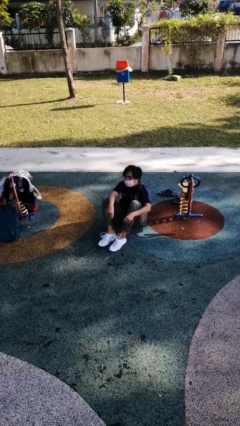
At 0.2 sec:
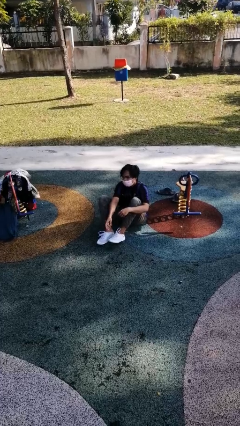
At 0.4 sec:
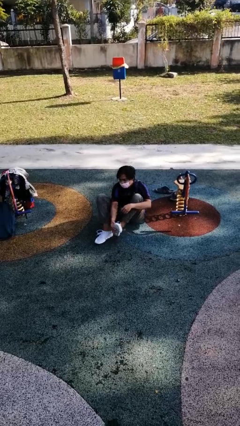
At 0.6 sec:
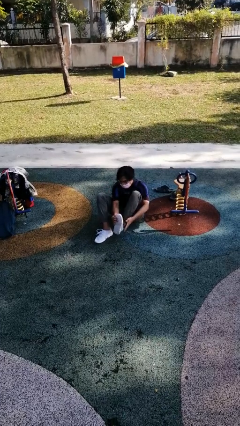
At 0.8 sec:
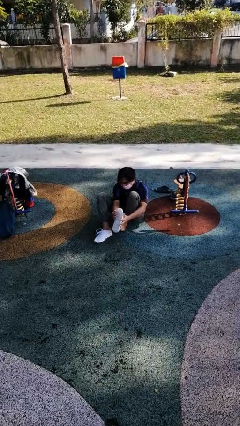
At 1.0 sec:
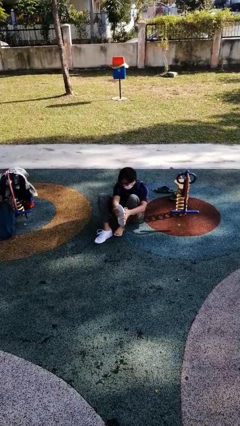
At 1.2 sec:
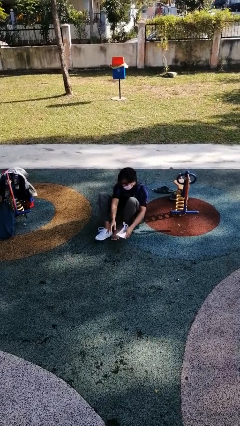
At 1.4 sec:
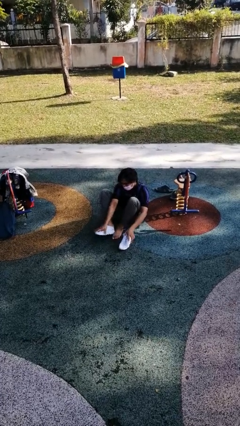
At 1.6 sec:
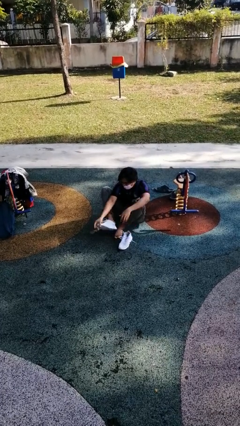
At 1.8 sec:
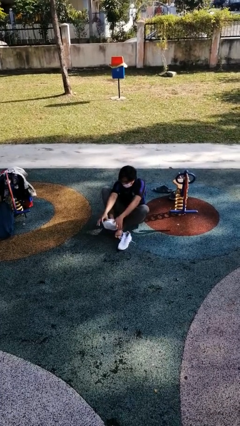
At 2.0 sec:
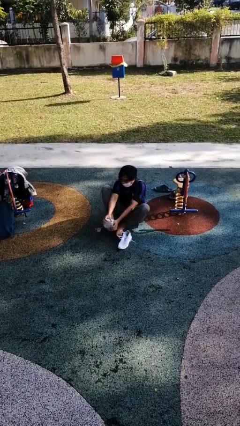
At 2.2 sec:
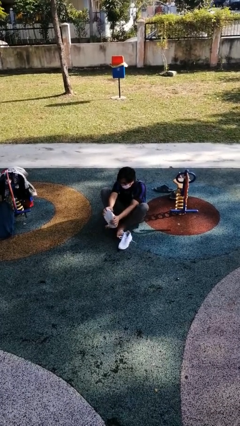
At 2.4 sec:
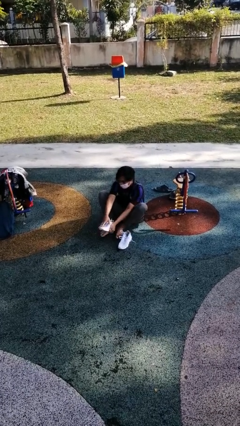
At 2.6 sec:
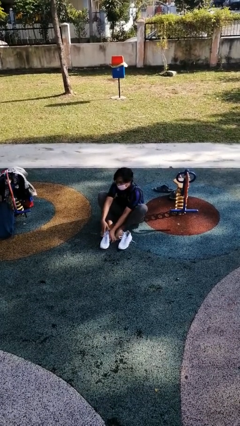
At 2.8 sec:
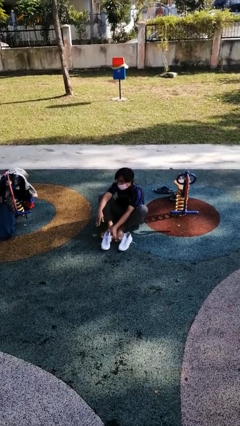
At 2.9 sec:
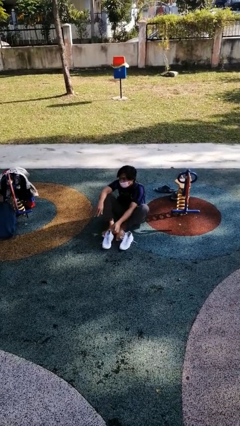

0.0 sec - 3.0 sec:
person takes off shoes

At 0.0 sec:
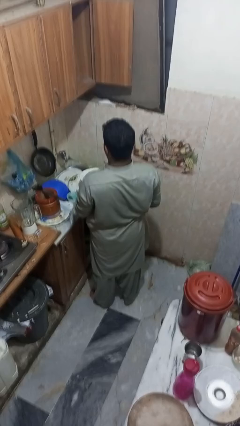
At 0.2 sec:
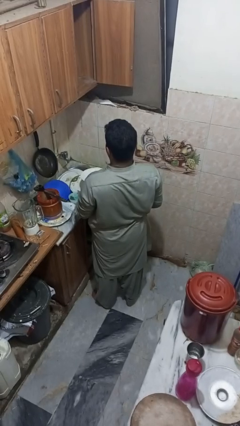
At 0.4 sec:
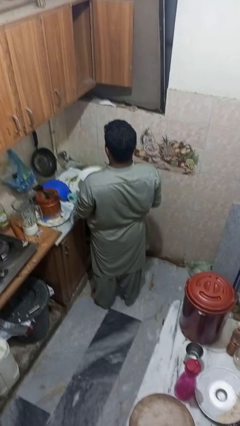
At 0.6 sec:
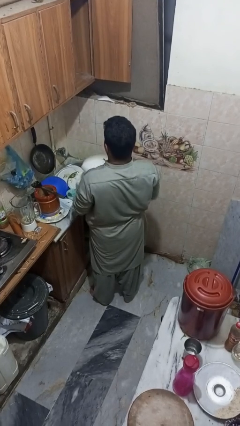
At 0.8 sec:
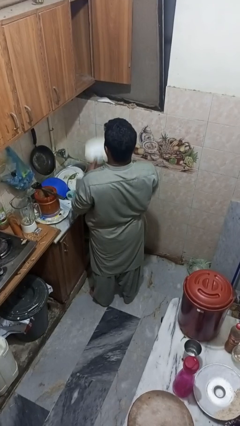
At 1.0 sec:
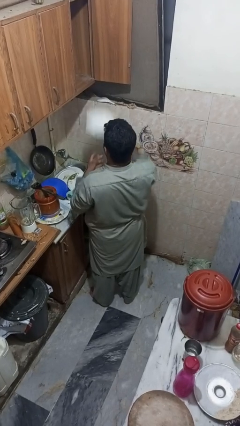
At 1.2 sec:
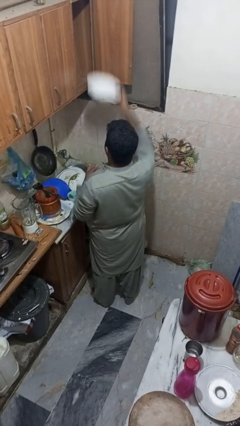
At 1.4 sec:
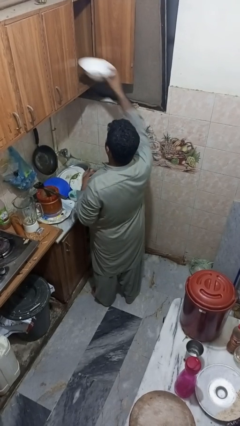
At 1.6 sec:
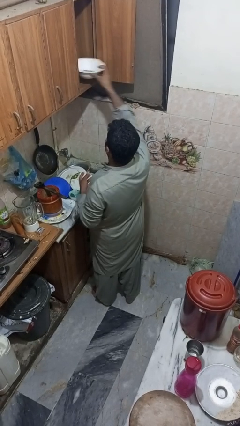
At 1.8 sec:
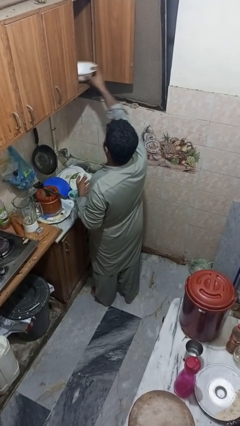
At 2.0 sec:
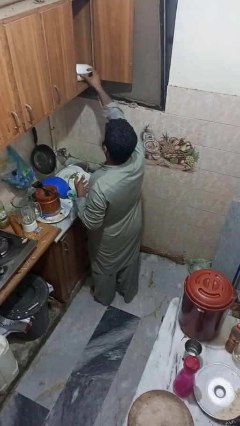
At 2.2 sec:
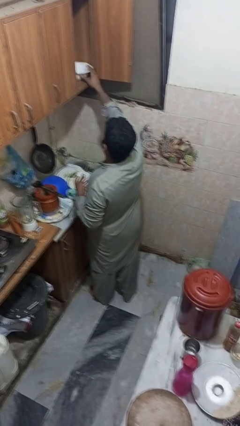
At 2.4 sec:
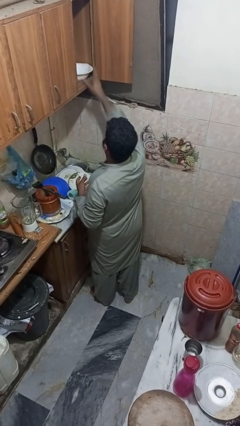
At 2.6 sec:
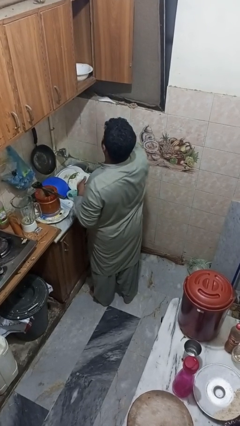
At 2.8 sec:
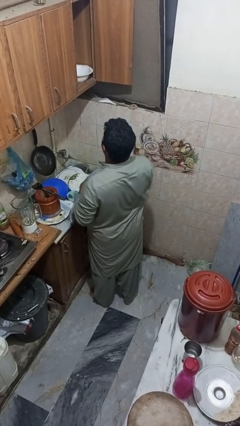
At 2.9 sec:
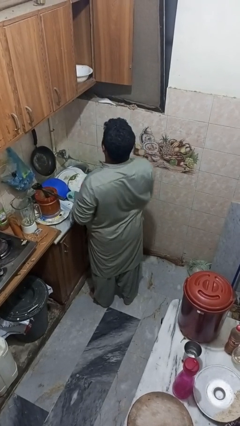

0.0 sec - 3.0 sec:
person puts object in cabinet

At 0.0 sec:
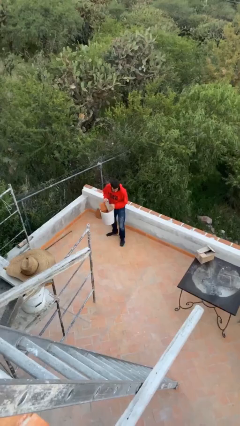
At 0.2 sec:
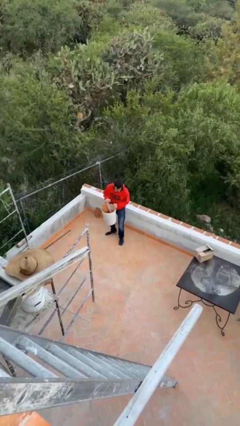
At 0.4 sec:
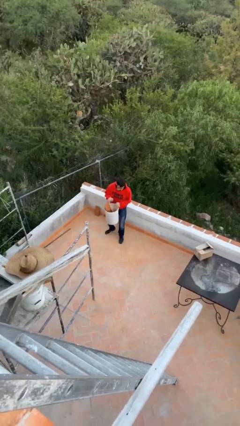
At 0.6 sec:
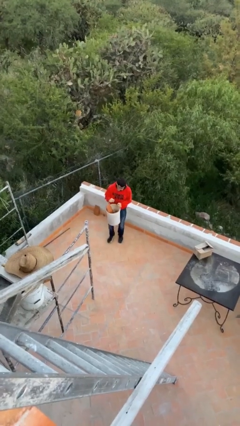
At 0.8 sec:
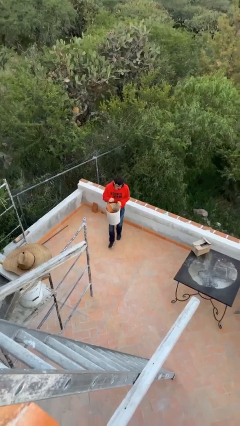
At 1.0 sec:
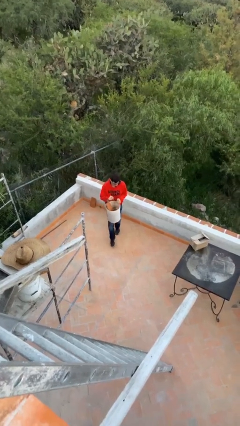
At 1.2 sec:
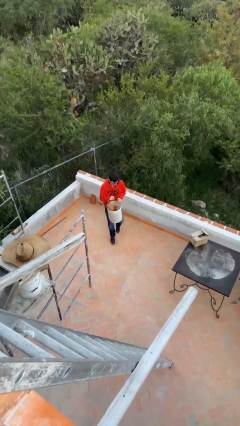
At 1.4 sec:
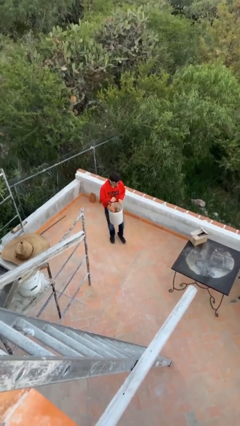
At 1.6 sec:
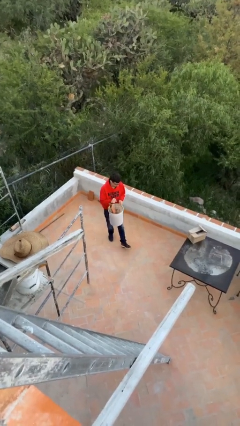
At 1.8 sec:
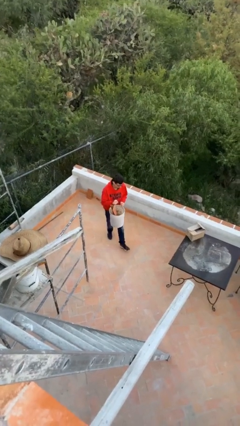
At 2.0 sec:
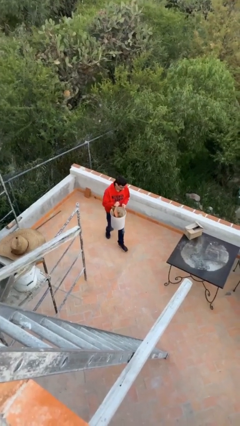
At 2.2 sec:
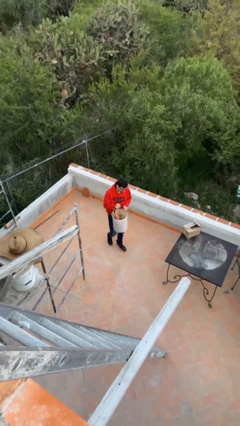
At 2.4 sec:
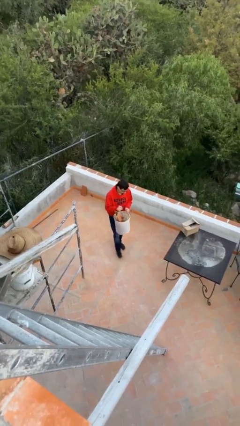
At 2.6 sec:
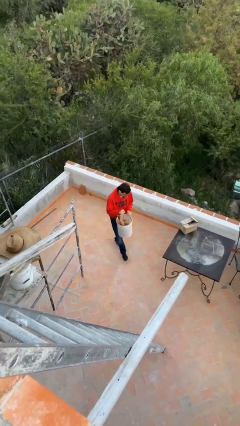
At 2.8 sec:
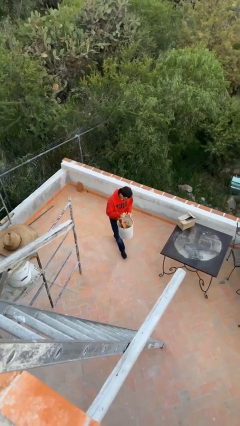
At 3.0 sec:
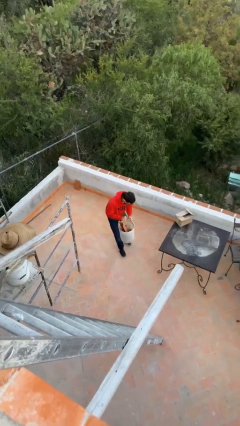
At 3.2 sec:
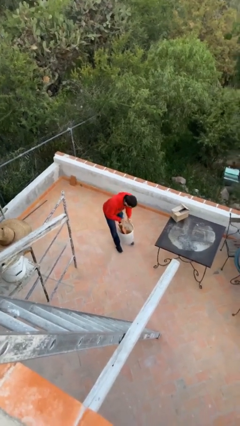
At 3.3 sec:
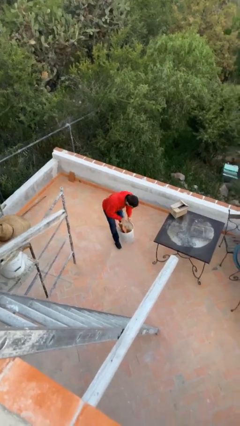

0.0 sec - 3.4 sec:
person carries heavy object

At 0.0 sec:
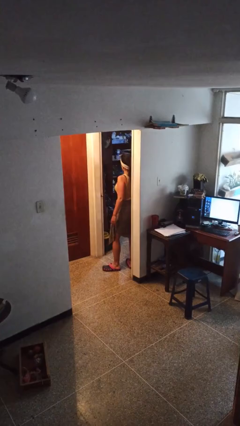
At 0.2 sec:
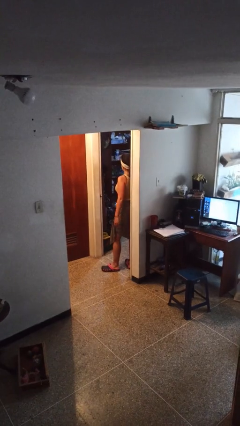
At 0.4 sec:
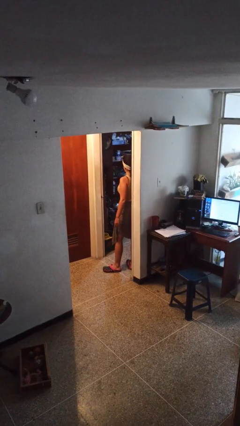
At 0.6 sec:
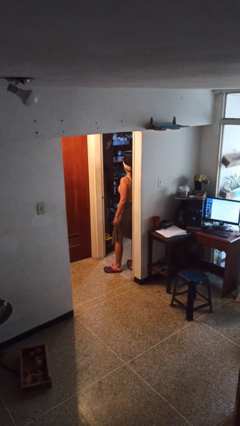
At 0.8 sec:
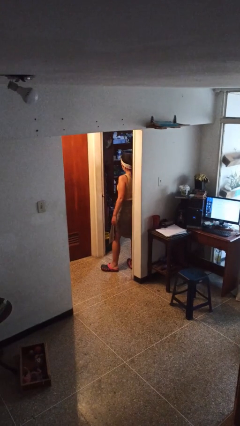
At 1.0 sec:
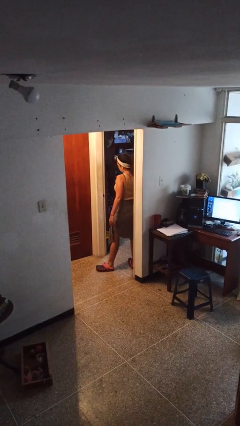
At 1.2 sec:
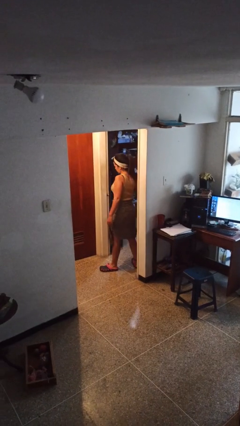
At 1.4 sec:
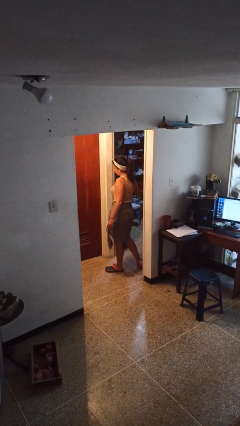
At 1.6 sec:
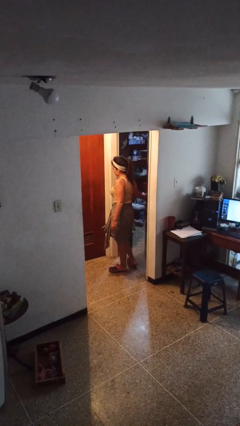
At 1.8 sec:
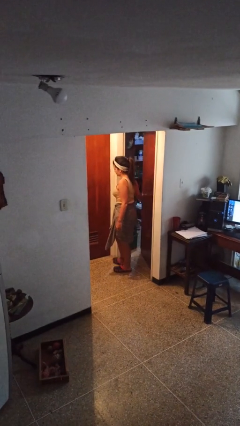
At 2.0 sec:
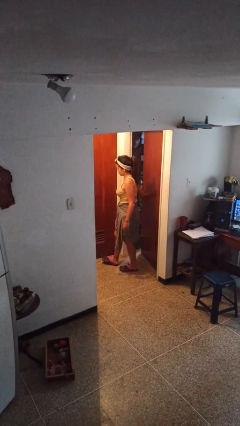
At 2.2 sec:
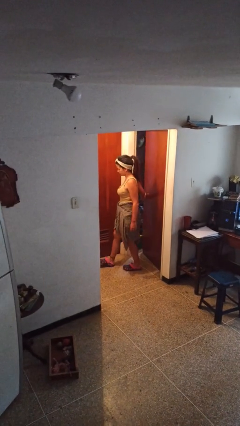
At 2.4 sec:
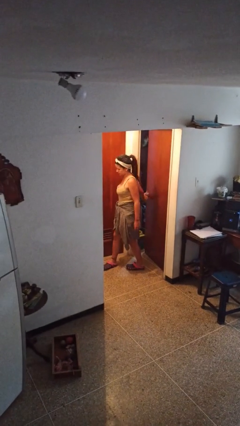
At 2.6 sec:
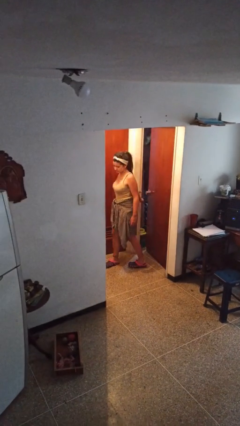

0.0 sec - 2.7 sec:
person closes facility door

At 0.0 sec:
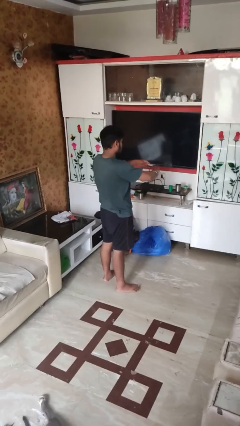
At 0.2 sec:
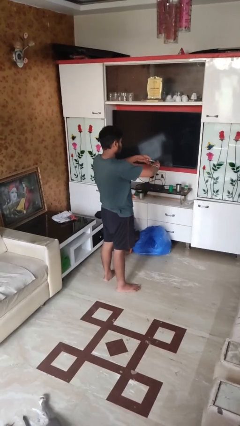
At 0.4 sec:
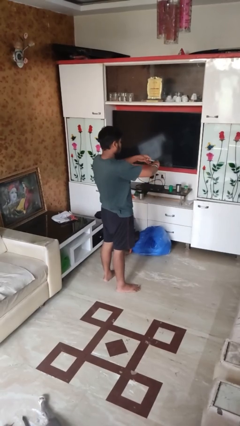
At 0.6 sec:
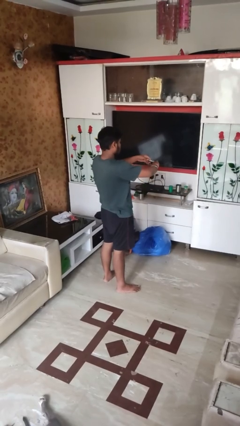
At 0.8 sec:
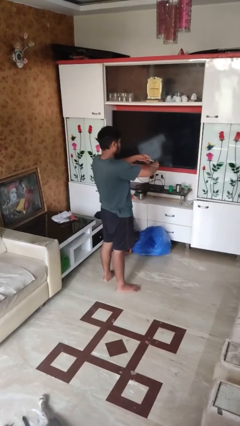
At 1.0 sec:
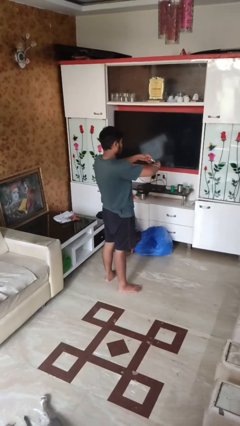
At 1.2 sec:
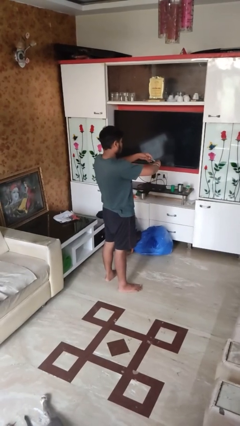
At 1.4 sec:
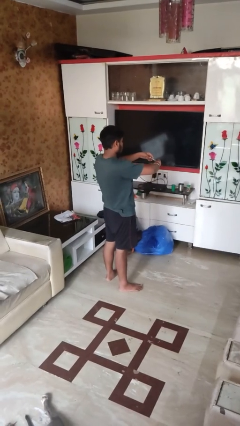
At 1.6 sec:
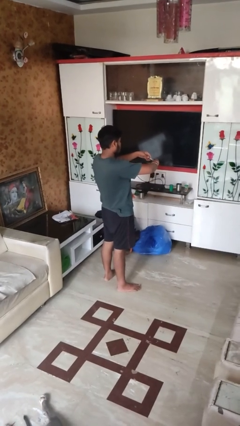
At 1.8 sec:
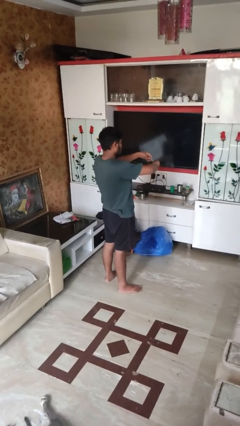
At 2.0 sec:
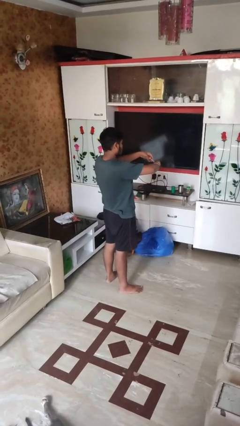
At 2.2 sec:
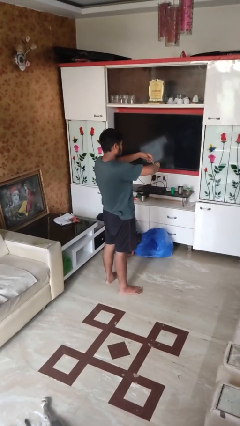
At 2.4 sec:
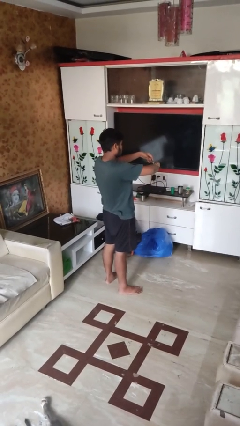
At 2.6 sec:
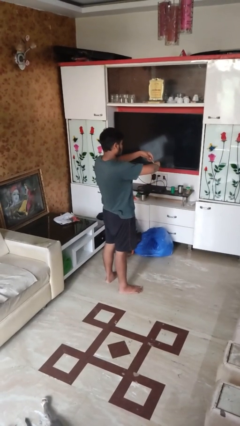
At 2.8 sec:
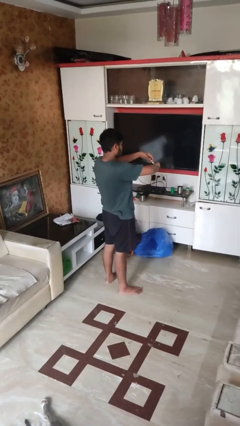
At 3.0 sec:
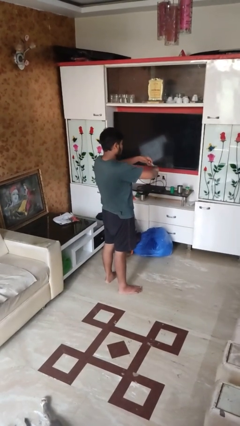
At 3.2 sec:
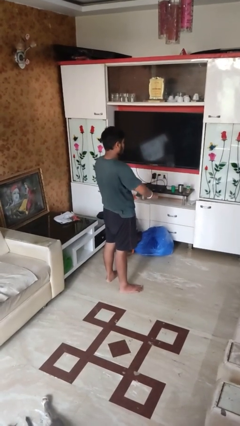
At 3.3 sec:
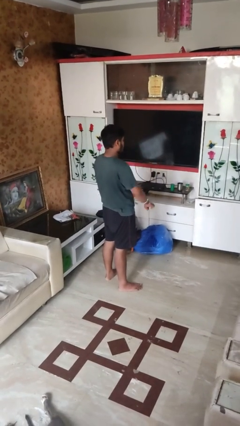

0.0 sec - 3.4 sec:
person clips fingernails

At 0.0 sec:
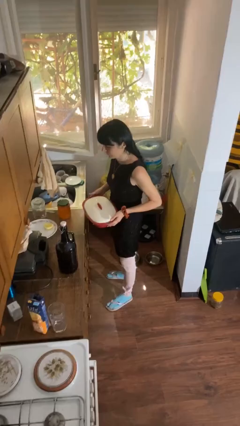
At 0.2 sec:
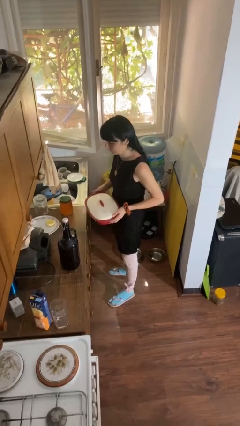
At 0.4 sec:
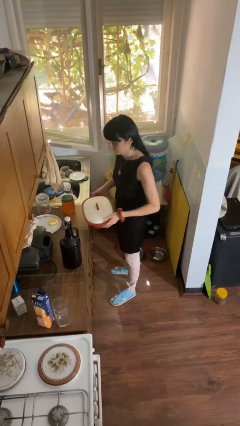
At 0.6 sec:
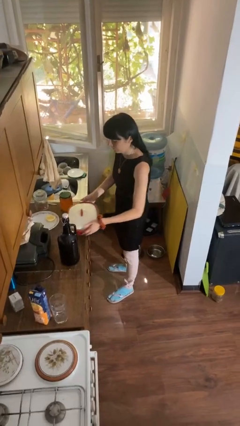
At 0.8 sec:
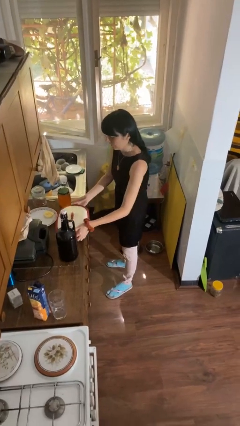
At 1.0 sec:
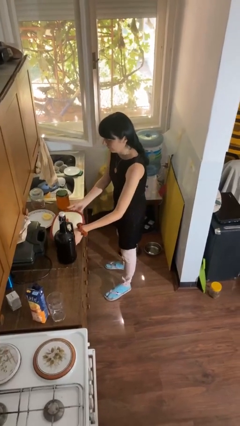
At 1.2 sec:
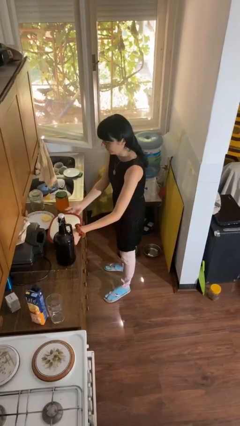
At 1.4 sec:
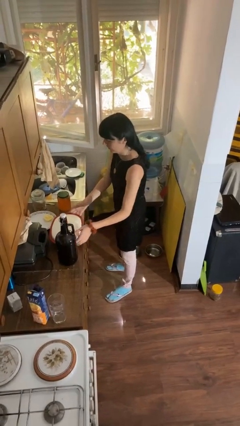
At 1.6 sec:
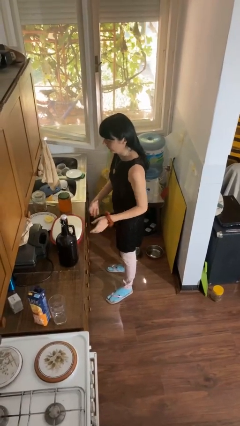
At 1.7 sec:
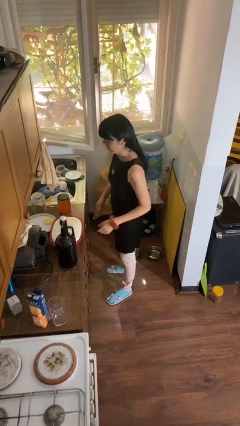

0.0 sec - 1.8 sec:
person puts down object on countertop
